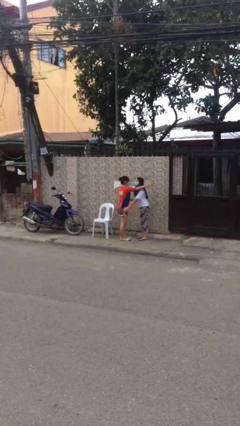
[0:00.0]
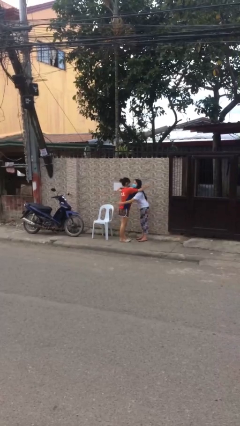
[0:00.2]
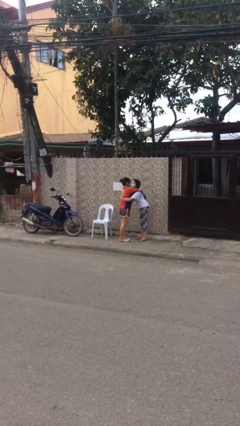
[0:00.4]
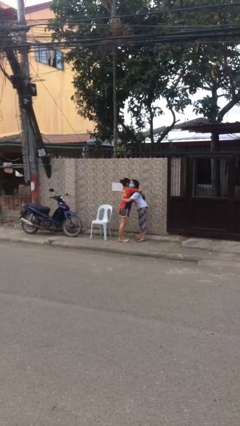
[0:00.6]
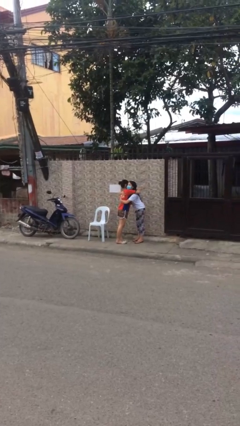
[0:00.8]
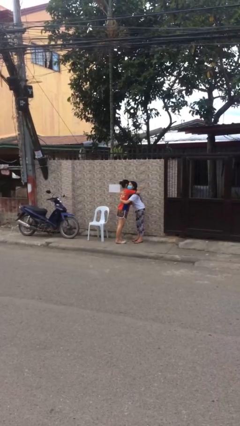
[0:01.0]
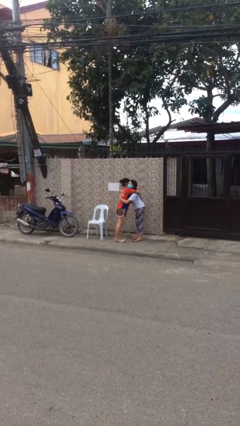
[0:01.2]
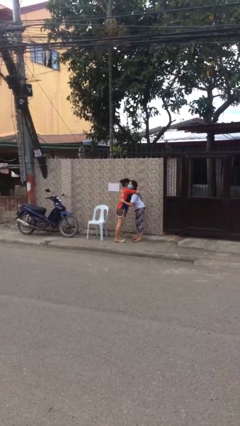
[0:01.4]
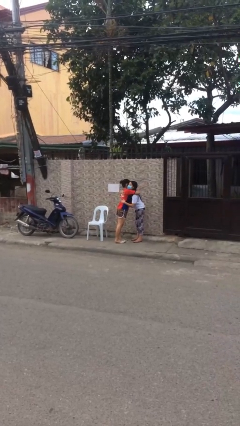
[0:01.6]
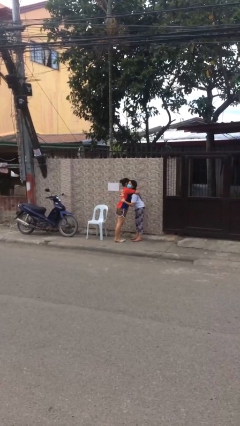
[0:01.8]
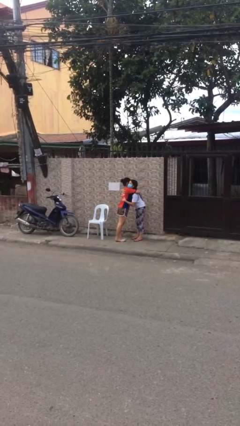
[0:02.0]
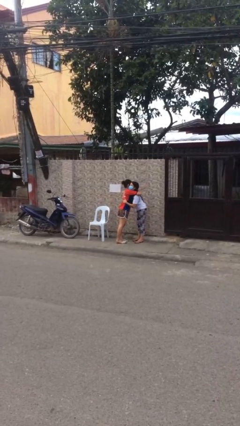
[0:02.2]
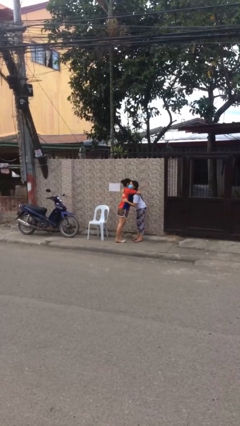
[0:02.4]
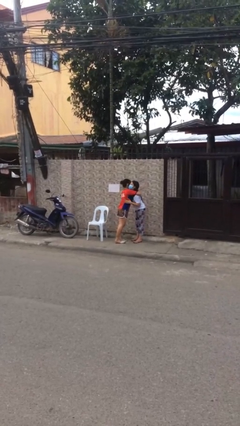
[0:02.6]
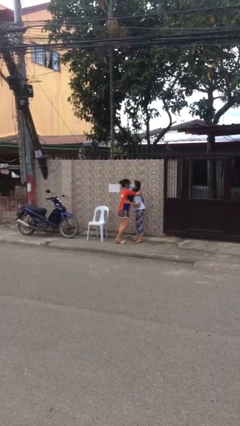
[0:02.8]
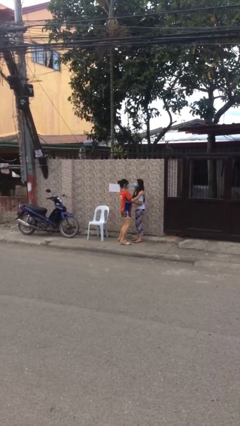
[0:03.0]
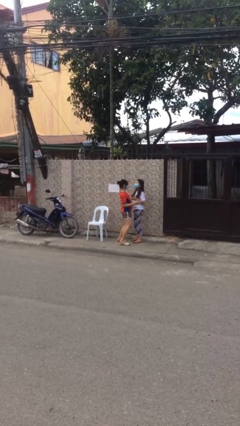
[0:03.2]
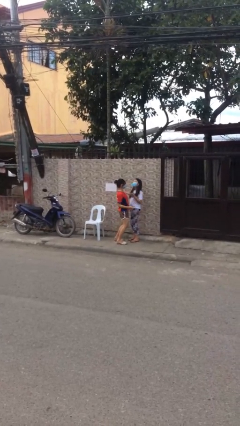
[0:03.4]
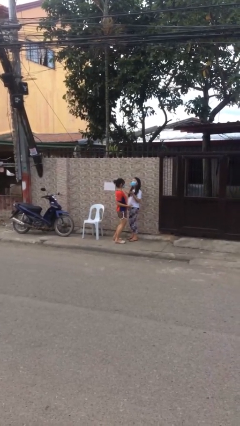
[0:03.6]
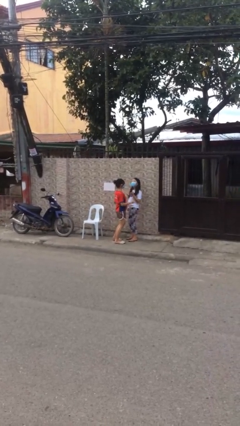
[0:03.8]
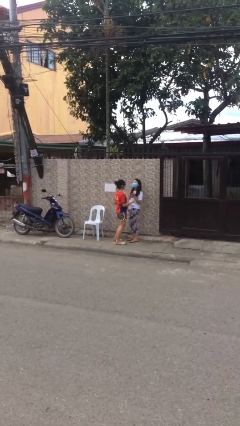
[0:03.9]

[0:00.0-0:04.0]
person embraces person

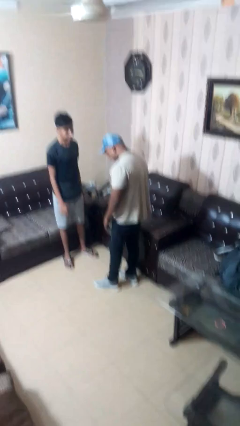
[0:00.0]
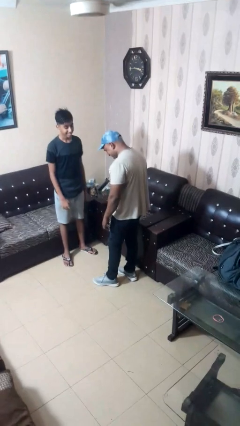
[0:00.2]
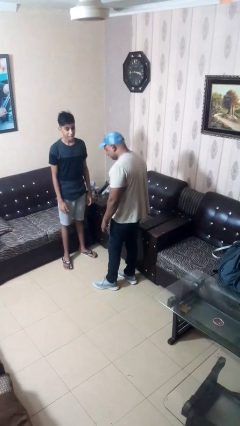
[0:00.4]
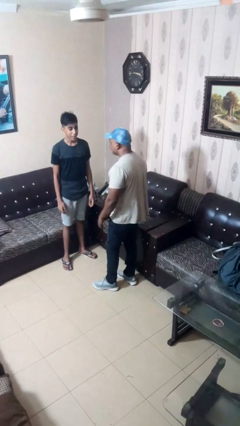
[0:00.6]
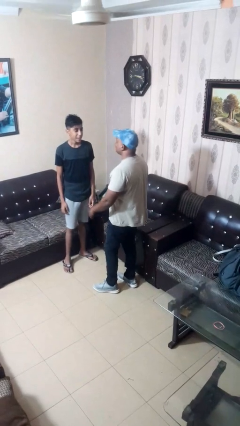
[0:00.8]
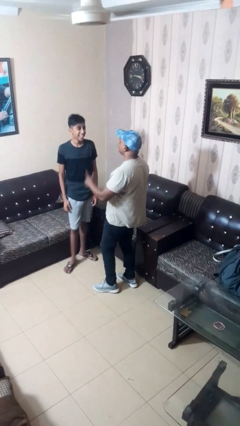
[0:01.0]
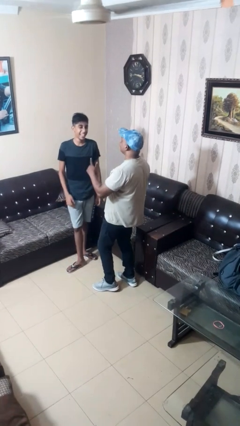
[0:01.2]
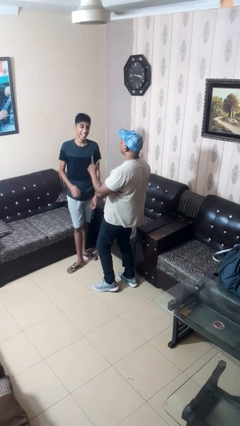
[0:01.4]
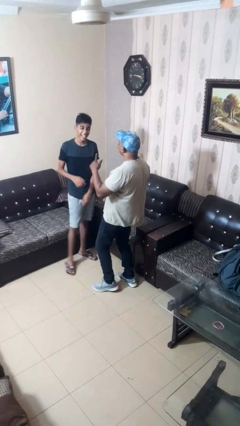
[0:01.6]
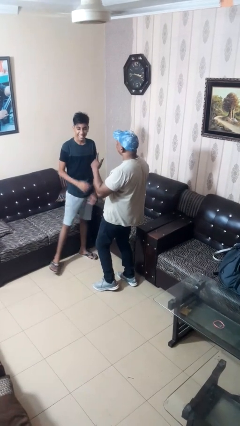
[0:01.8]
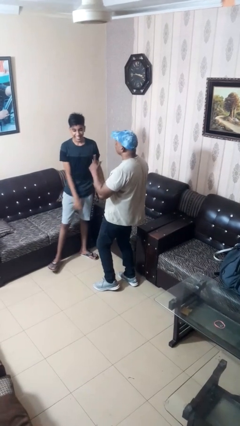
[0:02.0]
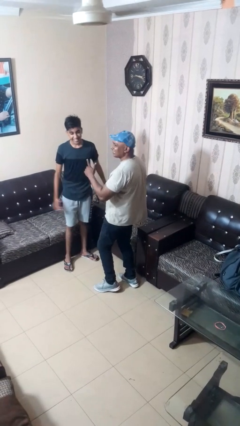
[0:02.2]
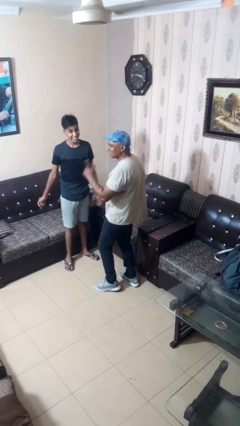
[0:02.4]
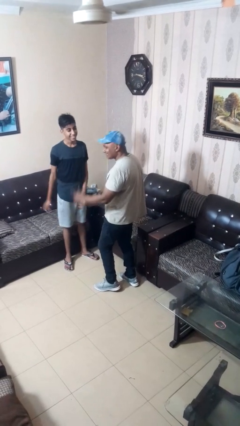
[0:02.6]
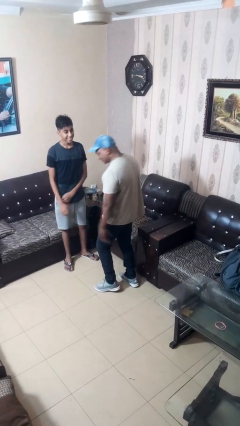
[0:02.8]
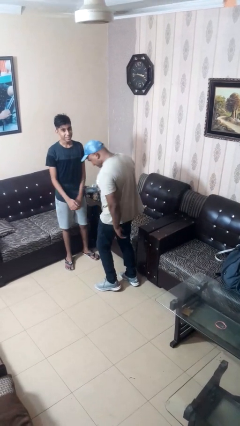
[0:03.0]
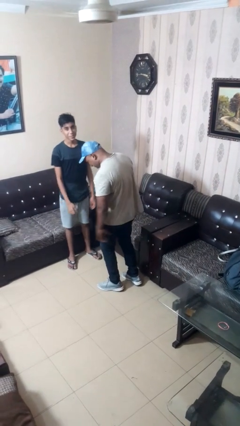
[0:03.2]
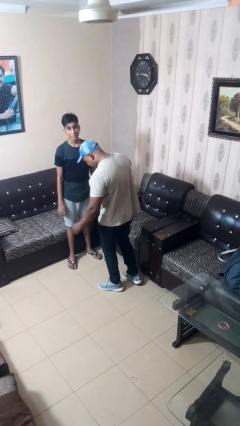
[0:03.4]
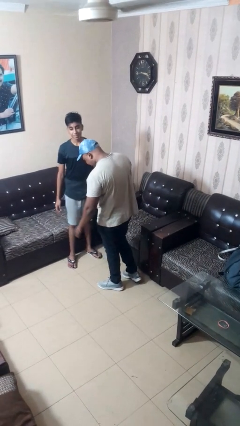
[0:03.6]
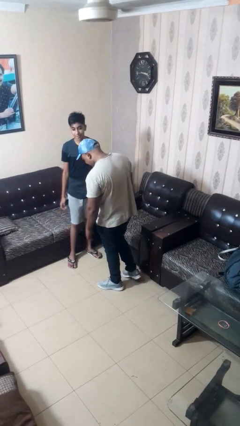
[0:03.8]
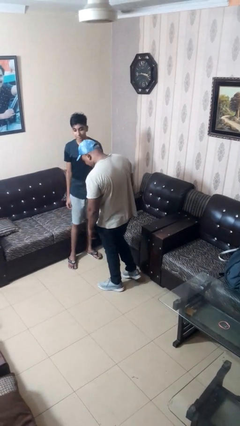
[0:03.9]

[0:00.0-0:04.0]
person laughs with person

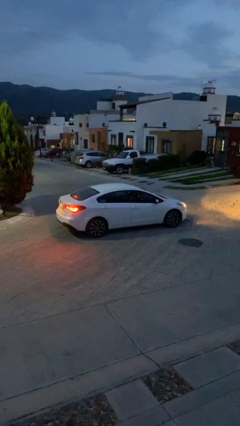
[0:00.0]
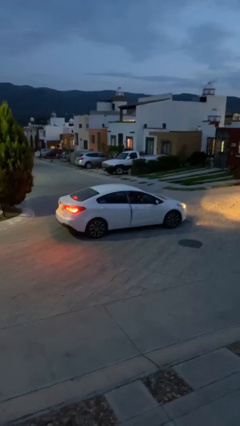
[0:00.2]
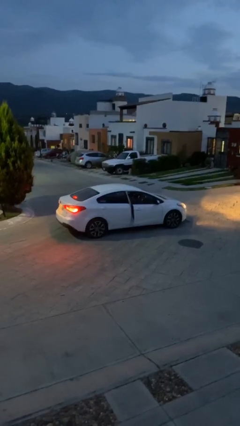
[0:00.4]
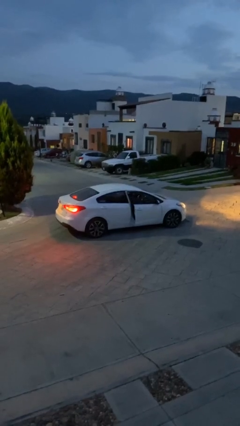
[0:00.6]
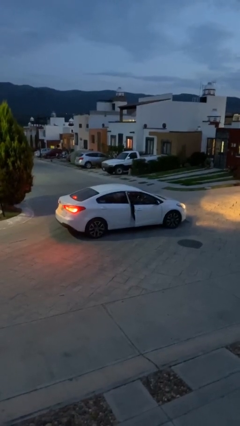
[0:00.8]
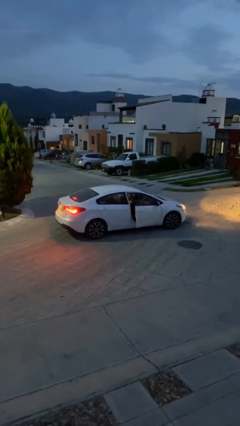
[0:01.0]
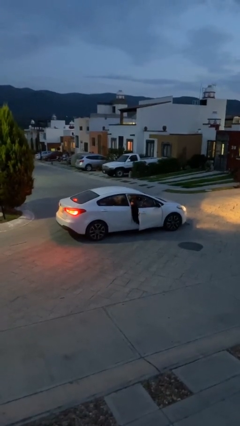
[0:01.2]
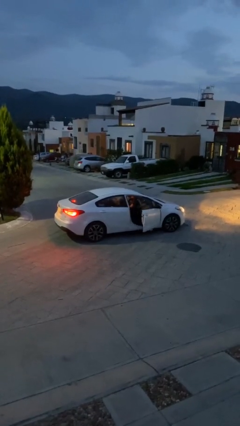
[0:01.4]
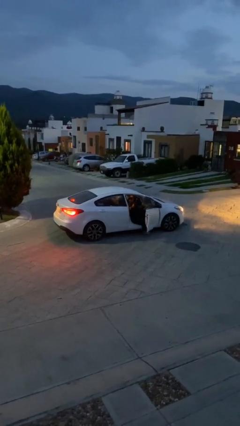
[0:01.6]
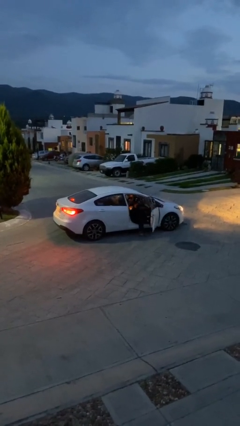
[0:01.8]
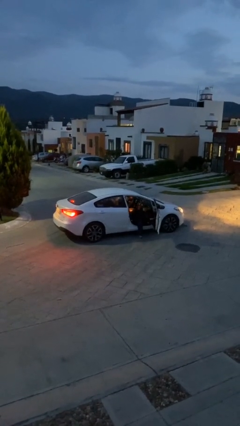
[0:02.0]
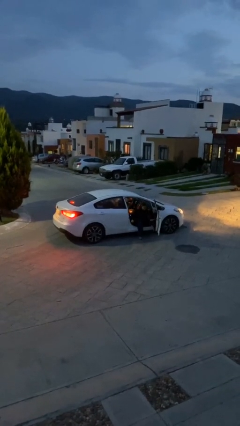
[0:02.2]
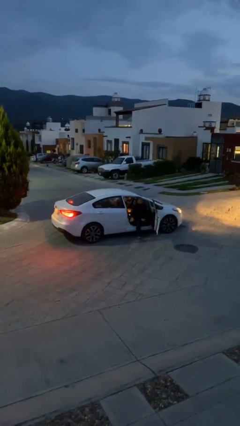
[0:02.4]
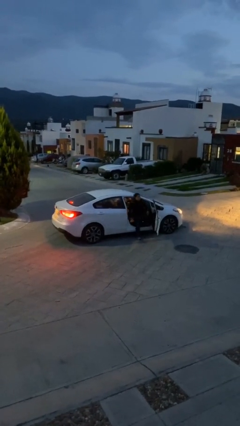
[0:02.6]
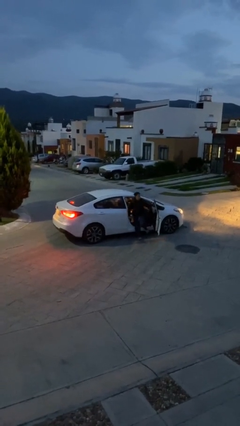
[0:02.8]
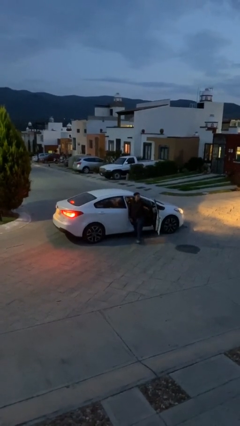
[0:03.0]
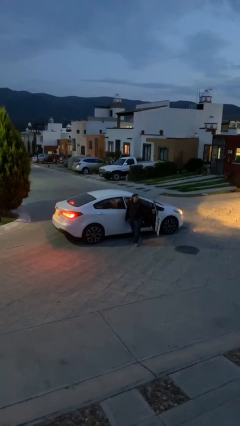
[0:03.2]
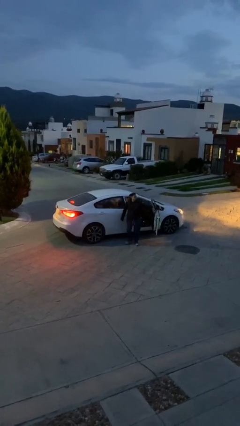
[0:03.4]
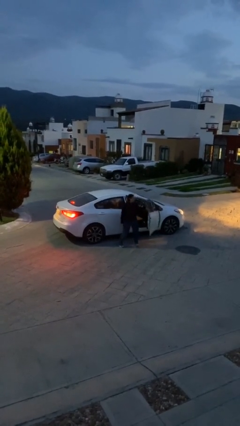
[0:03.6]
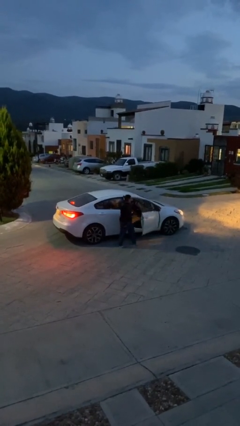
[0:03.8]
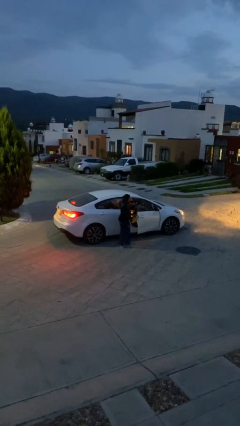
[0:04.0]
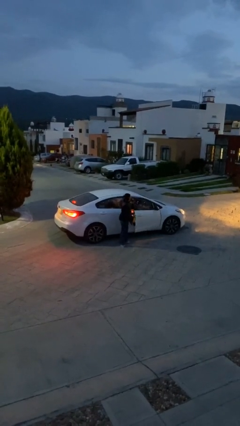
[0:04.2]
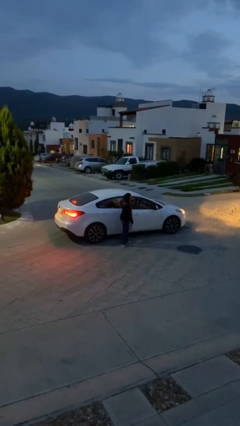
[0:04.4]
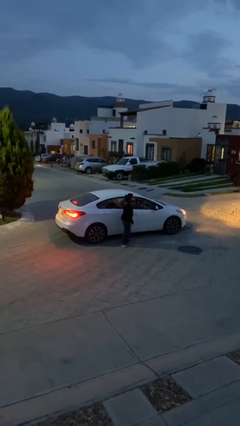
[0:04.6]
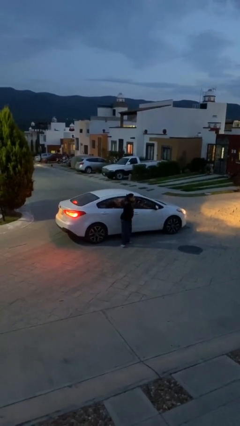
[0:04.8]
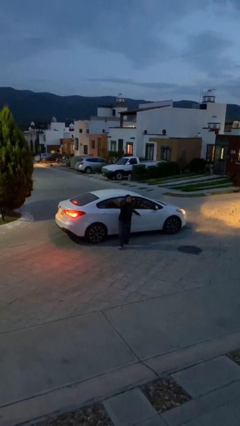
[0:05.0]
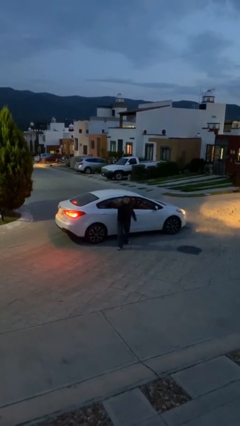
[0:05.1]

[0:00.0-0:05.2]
car drops off person

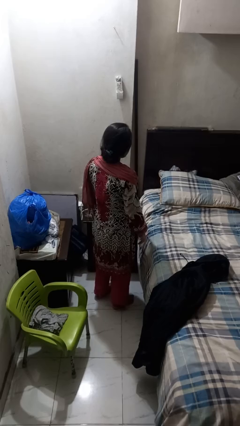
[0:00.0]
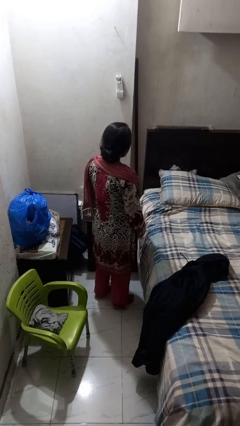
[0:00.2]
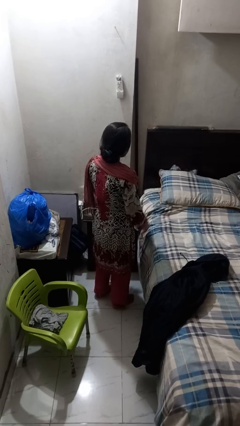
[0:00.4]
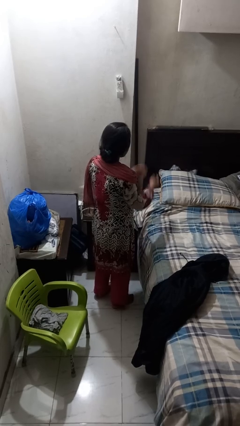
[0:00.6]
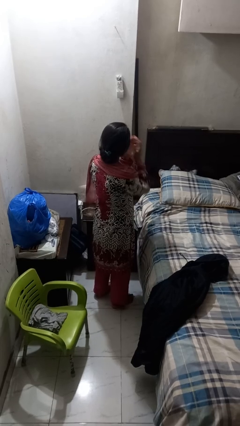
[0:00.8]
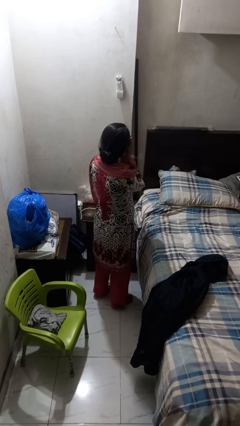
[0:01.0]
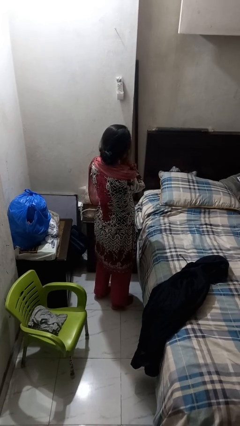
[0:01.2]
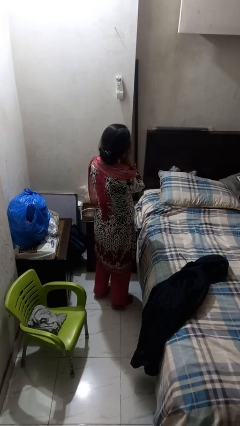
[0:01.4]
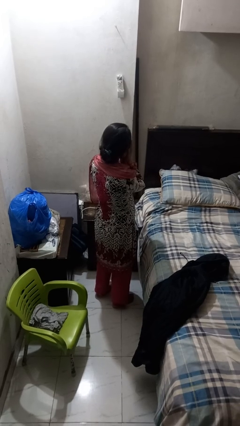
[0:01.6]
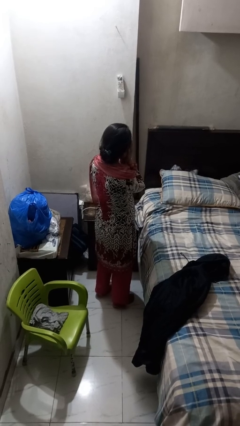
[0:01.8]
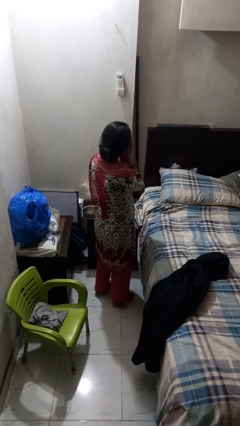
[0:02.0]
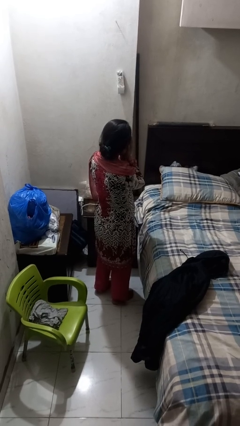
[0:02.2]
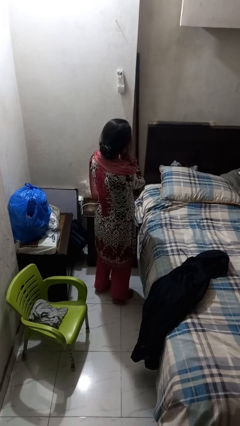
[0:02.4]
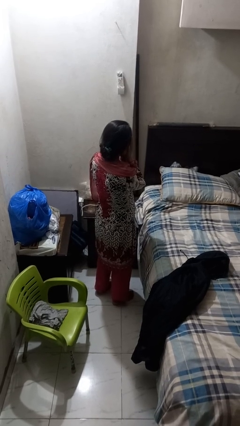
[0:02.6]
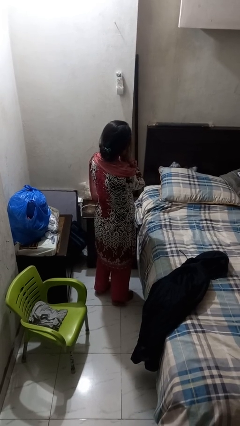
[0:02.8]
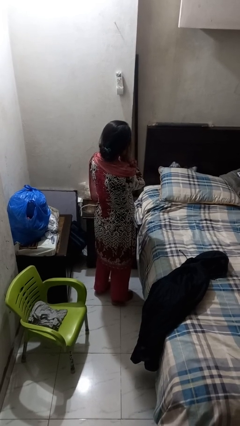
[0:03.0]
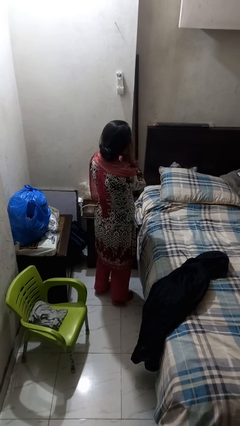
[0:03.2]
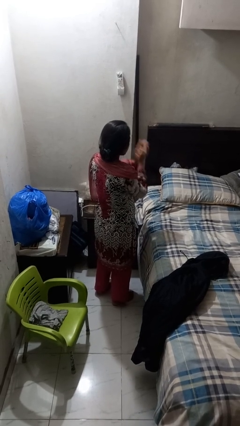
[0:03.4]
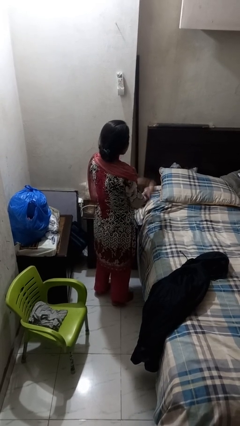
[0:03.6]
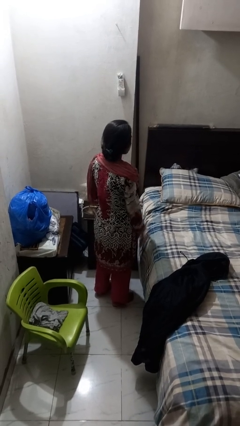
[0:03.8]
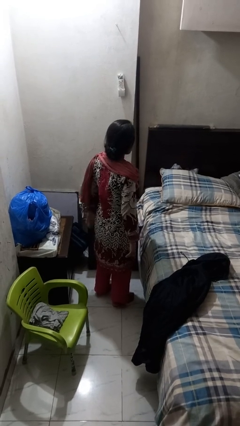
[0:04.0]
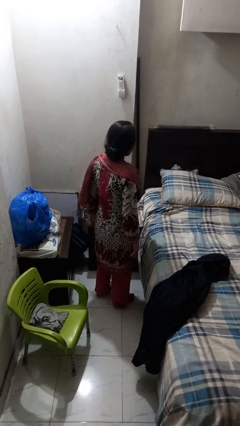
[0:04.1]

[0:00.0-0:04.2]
person covers face with hands

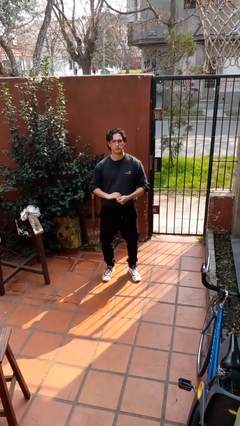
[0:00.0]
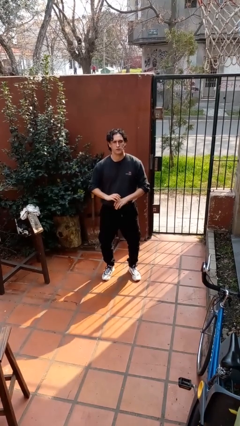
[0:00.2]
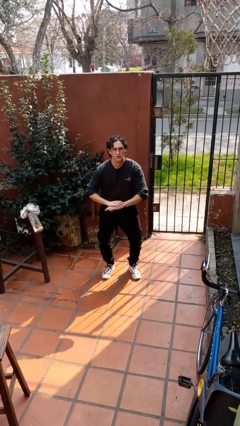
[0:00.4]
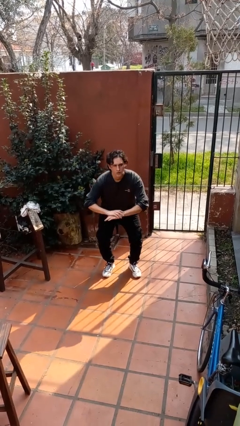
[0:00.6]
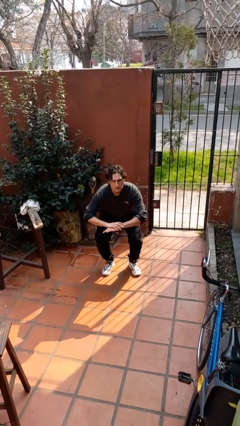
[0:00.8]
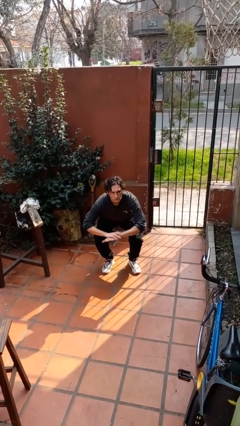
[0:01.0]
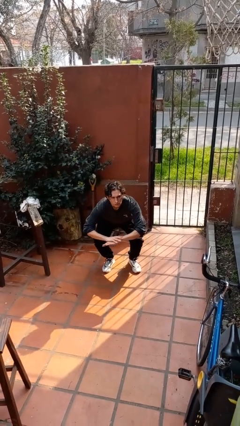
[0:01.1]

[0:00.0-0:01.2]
person squats
